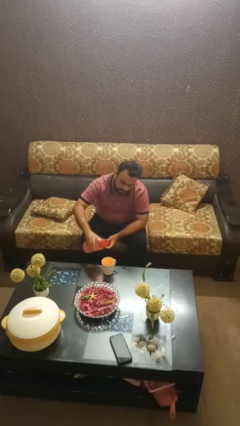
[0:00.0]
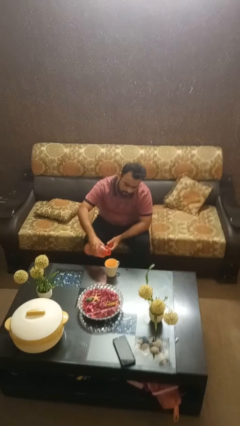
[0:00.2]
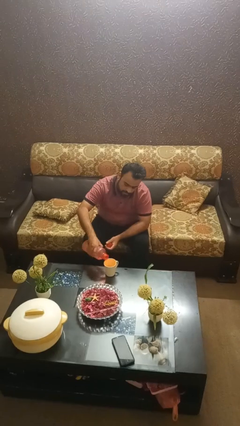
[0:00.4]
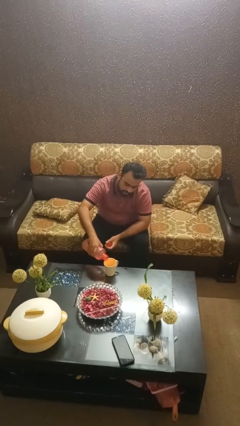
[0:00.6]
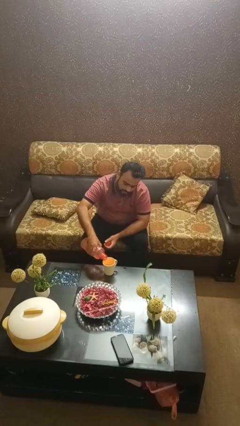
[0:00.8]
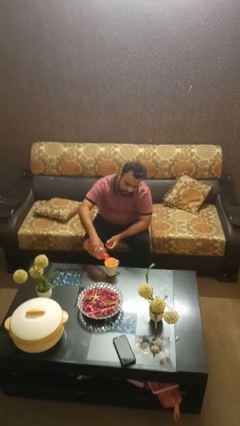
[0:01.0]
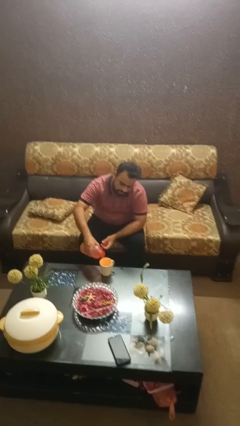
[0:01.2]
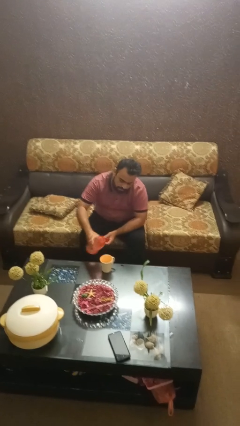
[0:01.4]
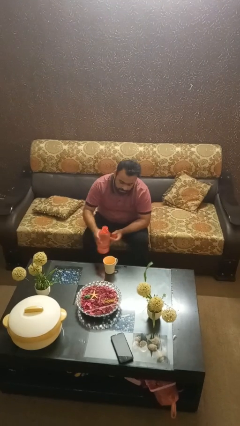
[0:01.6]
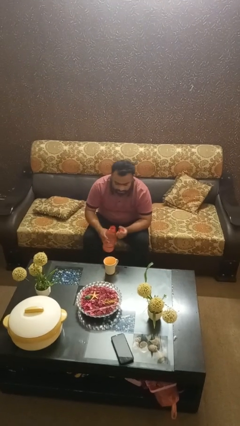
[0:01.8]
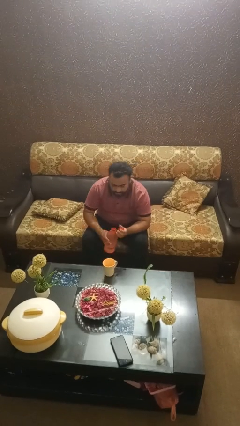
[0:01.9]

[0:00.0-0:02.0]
person pours liquid into cup

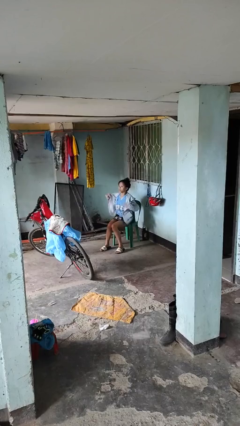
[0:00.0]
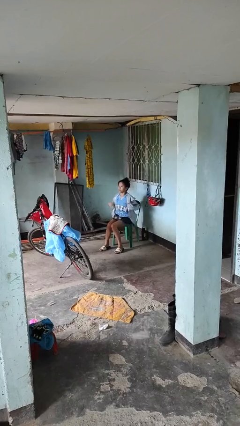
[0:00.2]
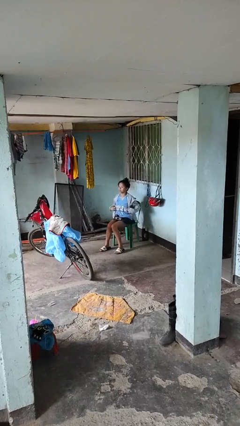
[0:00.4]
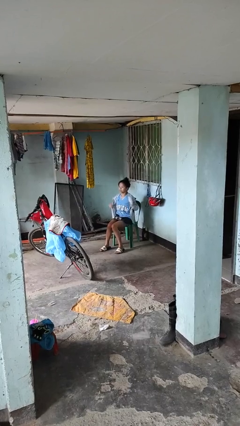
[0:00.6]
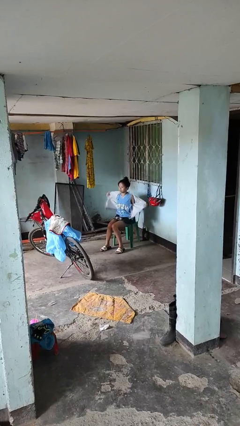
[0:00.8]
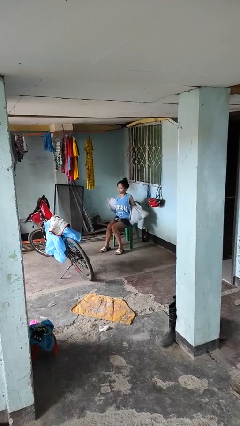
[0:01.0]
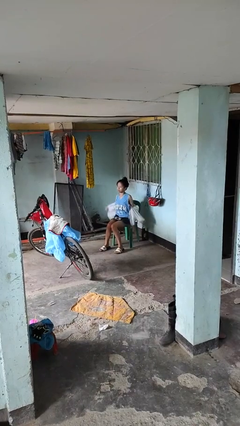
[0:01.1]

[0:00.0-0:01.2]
person unzips jacket

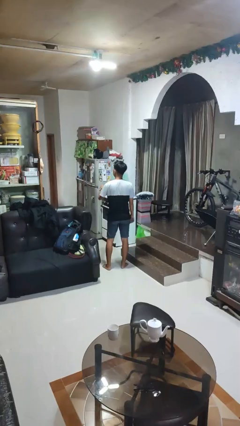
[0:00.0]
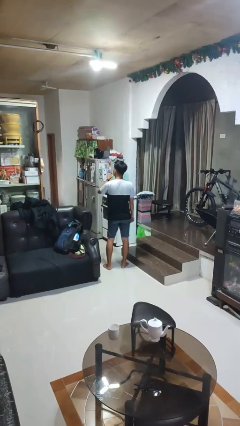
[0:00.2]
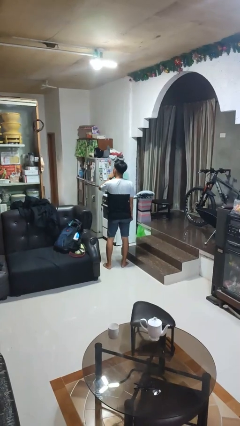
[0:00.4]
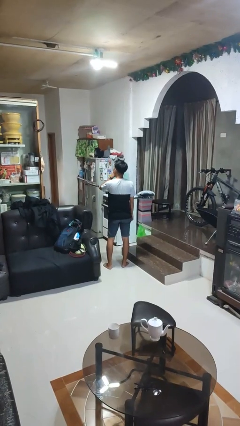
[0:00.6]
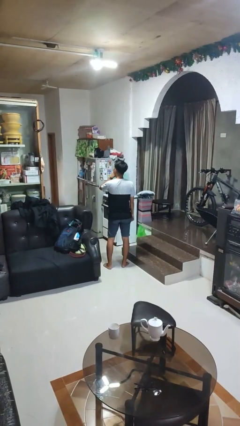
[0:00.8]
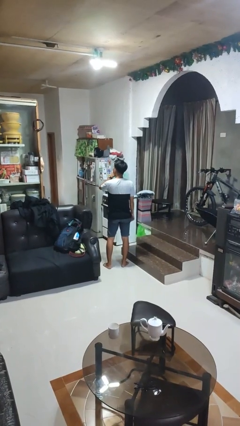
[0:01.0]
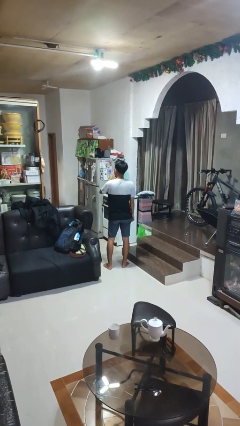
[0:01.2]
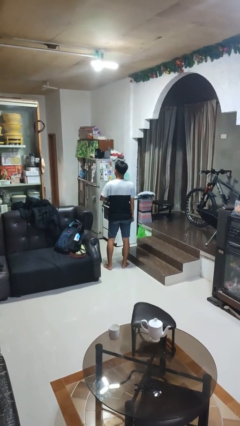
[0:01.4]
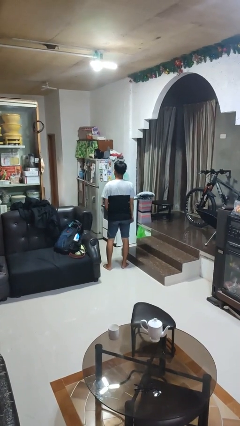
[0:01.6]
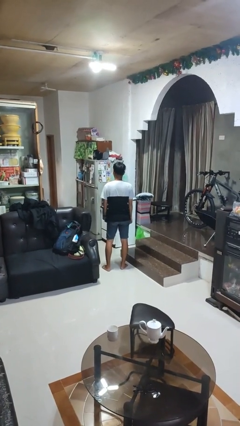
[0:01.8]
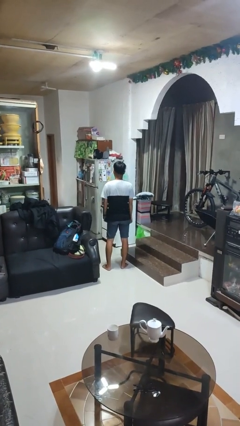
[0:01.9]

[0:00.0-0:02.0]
person gestures be quiet

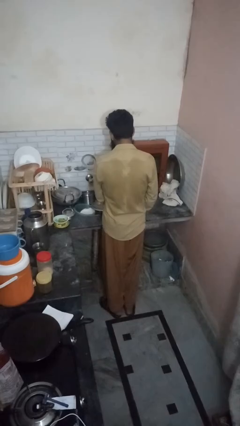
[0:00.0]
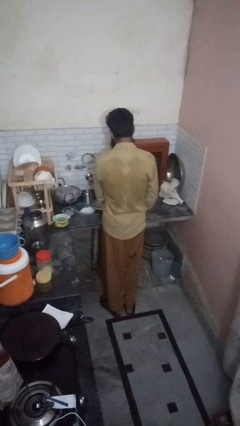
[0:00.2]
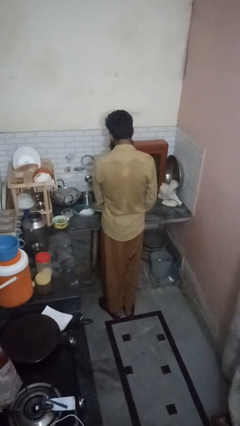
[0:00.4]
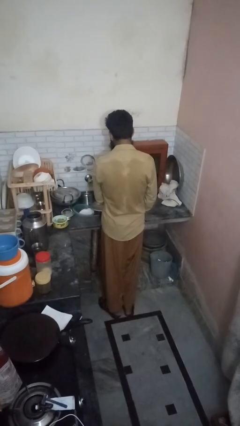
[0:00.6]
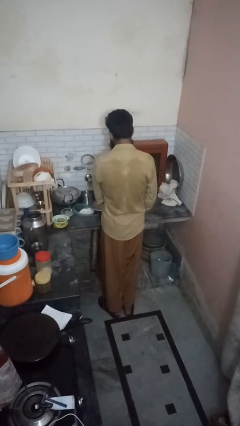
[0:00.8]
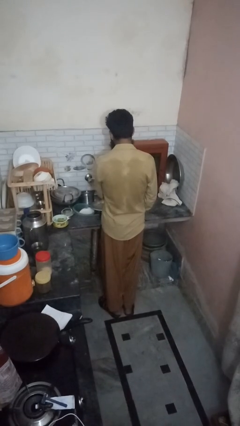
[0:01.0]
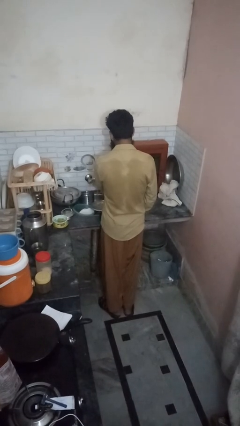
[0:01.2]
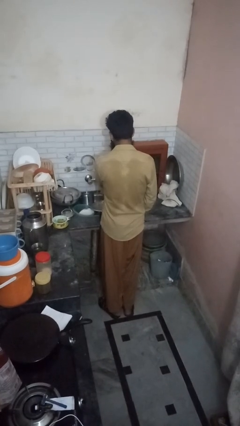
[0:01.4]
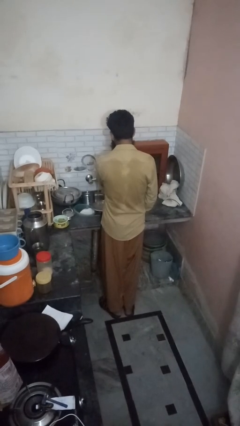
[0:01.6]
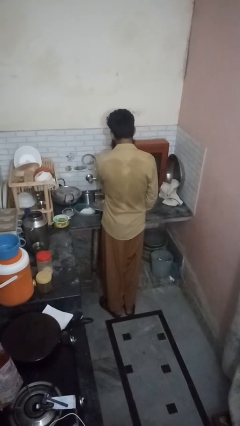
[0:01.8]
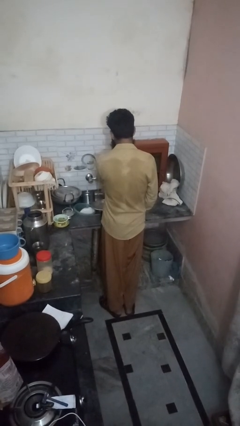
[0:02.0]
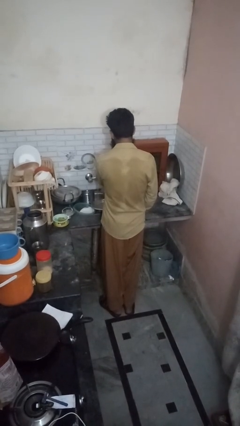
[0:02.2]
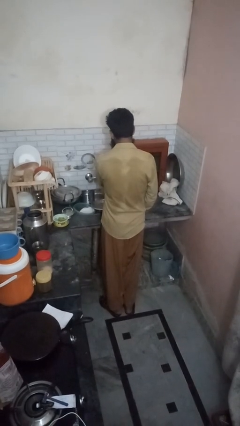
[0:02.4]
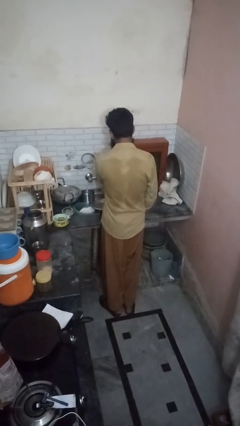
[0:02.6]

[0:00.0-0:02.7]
person closes dishwasher

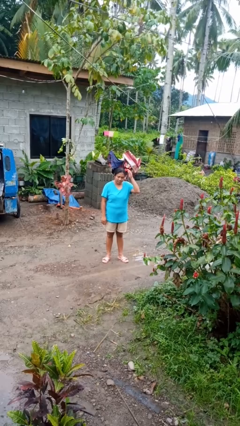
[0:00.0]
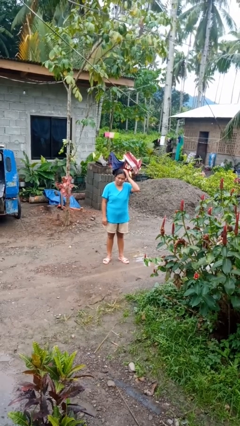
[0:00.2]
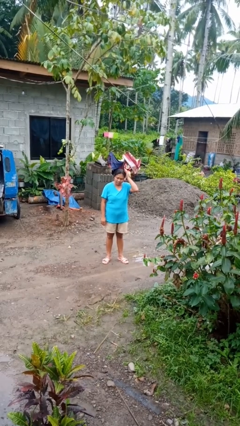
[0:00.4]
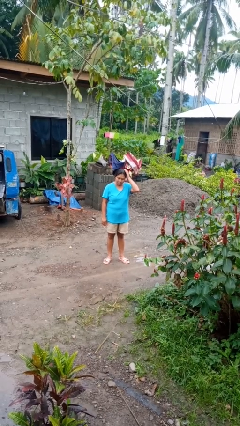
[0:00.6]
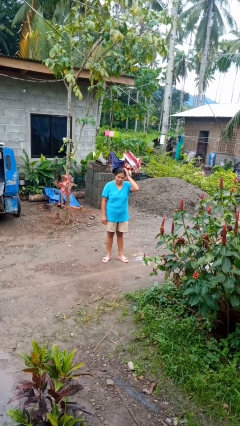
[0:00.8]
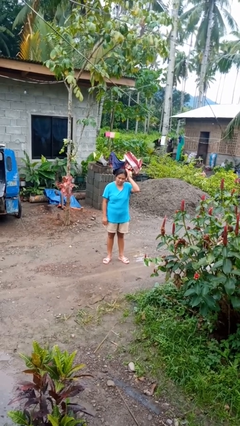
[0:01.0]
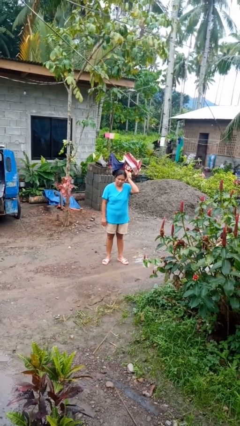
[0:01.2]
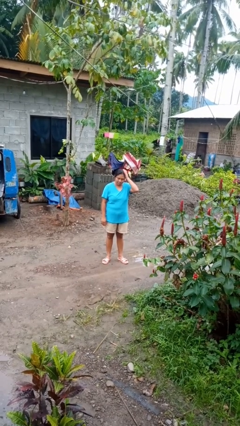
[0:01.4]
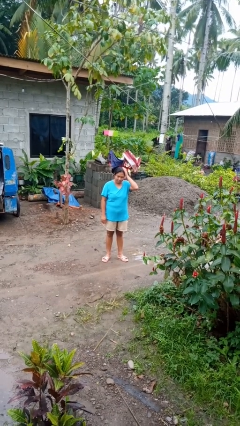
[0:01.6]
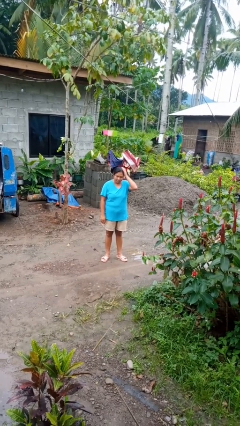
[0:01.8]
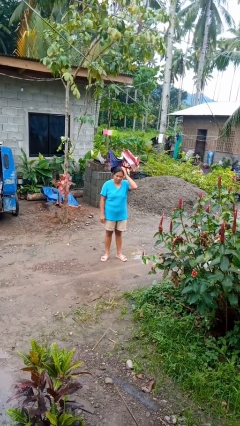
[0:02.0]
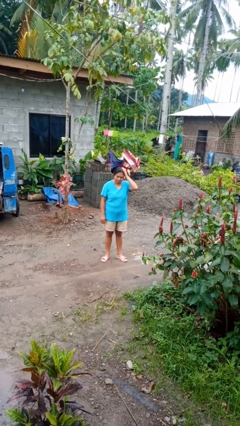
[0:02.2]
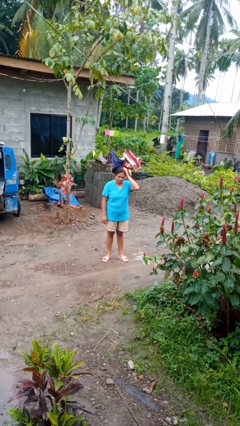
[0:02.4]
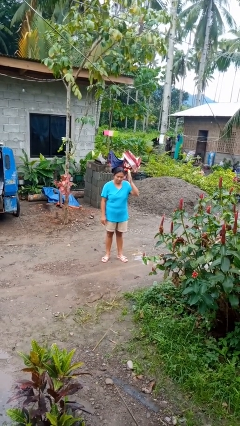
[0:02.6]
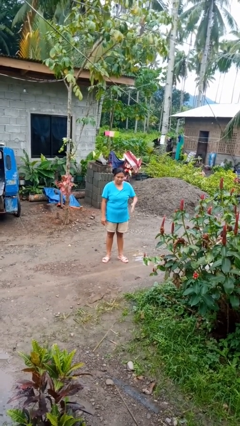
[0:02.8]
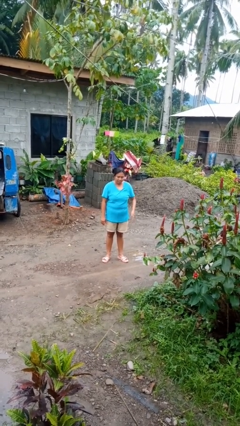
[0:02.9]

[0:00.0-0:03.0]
person pats head

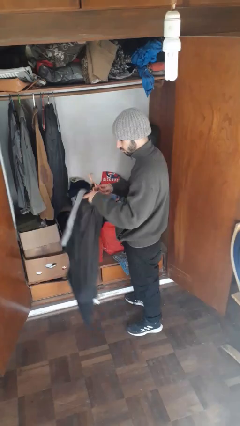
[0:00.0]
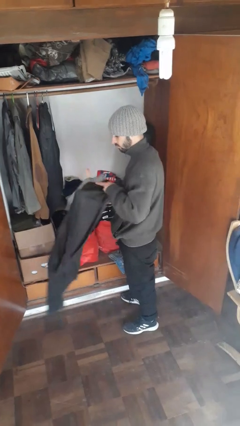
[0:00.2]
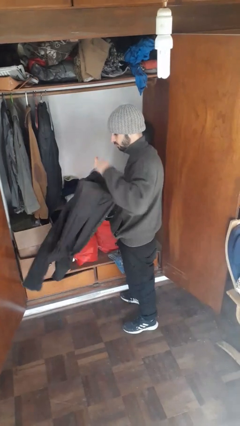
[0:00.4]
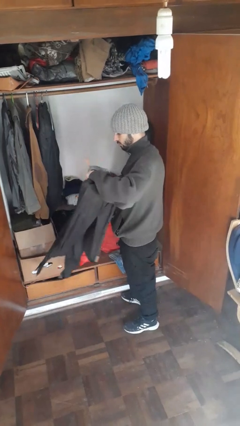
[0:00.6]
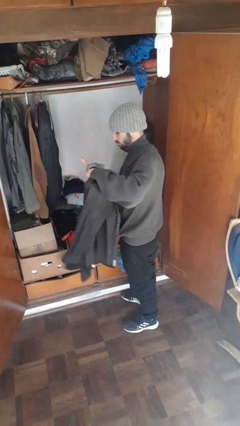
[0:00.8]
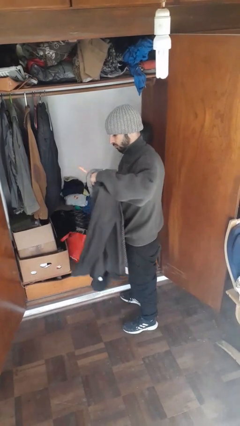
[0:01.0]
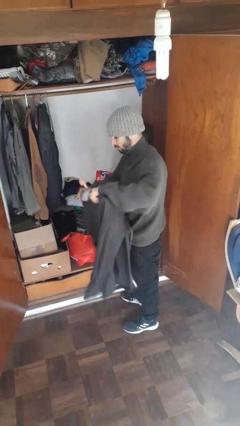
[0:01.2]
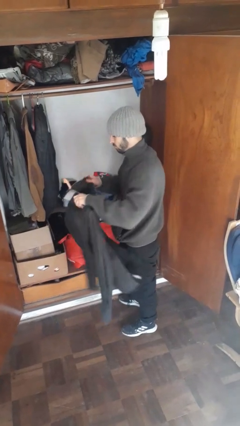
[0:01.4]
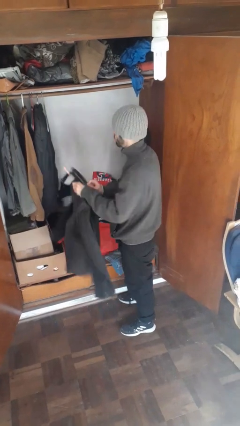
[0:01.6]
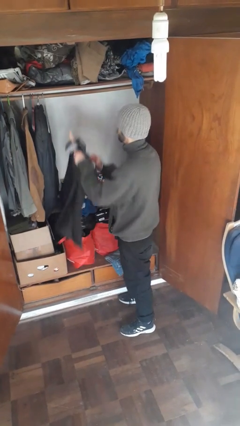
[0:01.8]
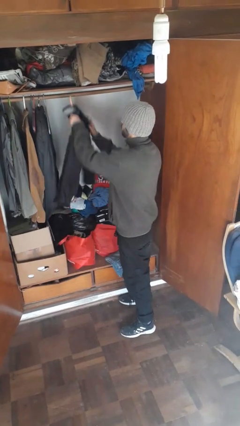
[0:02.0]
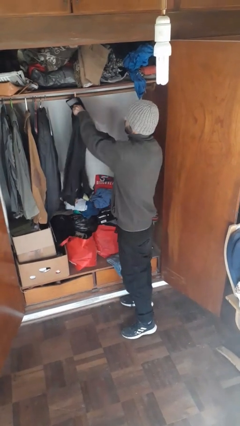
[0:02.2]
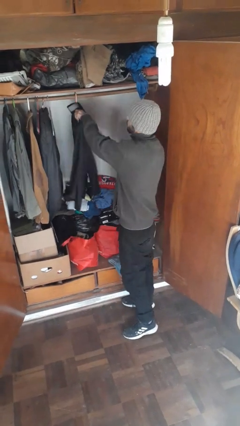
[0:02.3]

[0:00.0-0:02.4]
person puts clothes into closet

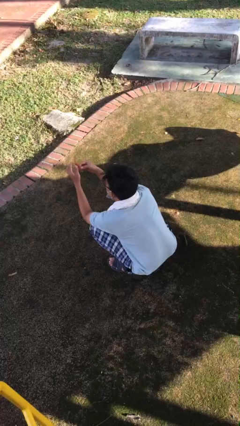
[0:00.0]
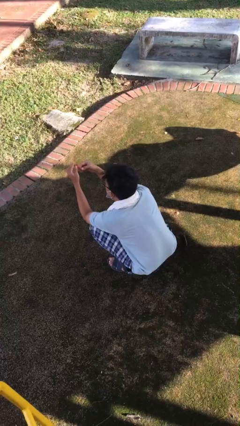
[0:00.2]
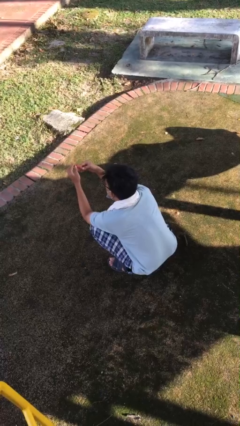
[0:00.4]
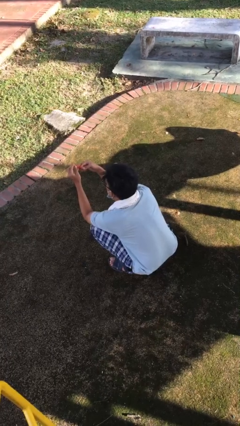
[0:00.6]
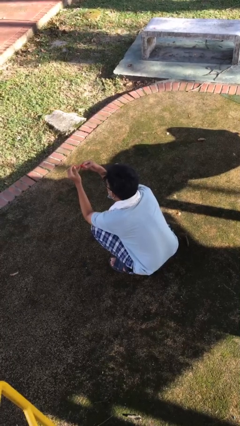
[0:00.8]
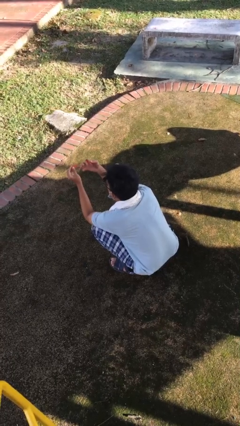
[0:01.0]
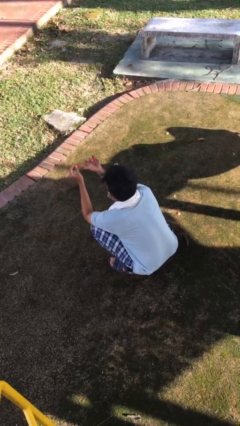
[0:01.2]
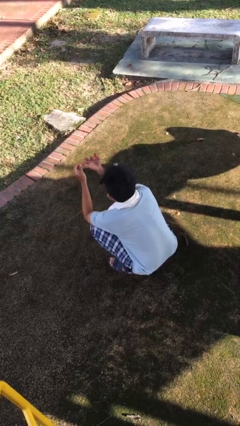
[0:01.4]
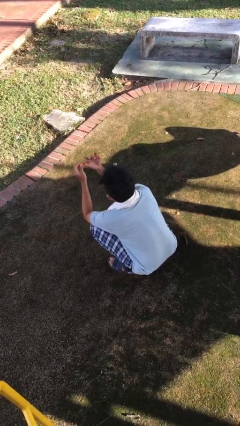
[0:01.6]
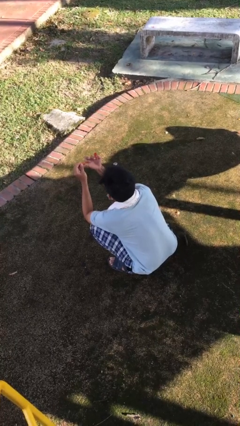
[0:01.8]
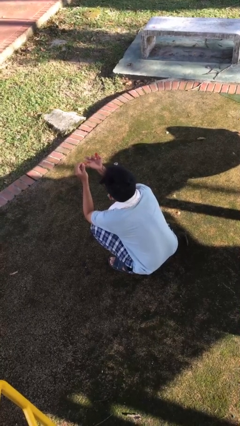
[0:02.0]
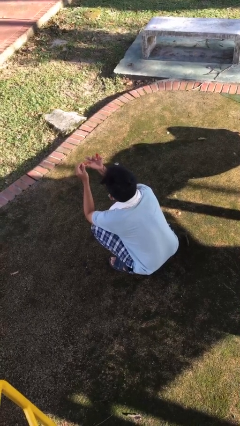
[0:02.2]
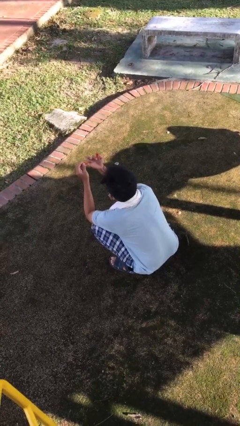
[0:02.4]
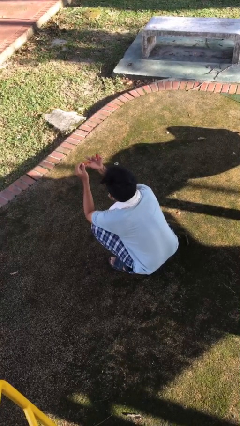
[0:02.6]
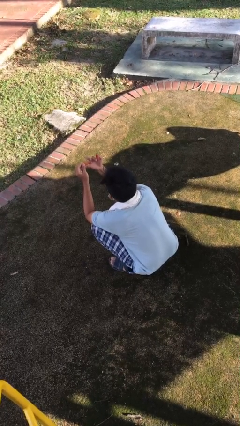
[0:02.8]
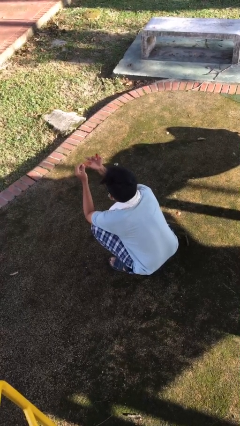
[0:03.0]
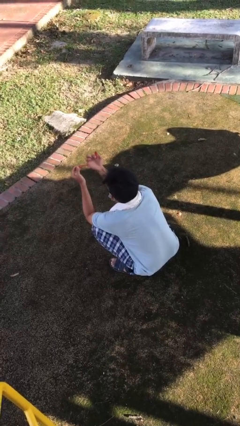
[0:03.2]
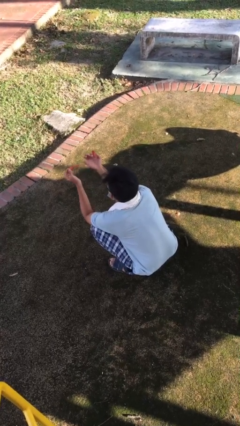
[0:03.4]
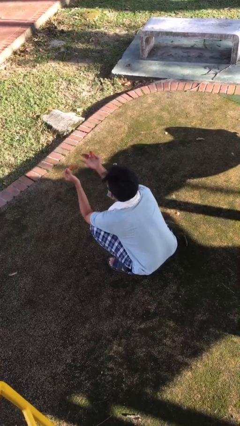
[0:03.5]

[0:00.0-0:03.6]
person paints fingernails
